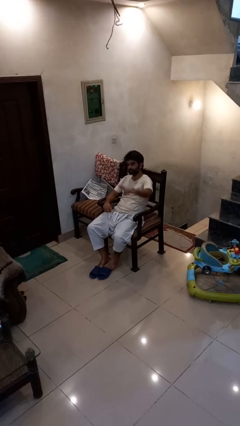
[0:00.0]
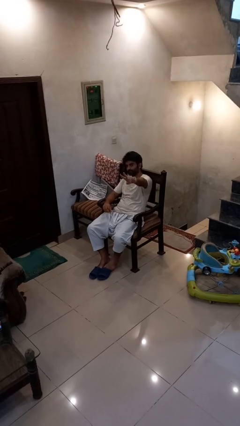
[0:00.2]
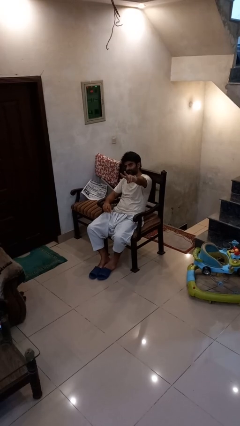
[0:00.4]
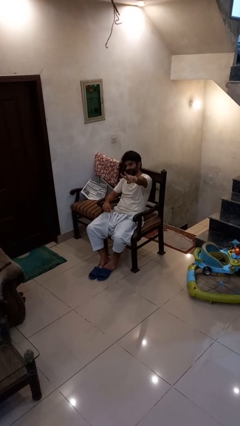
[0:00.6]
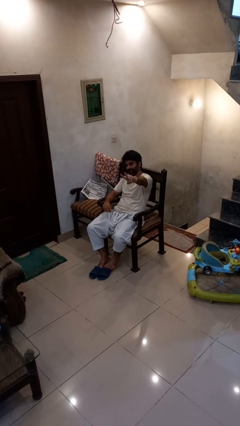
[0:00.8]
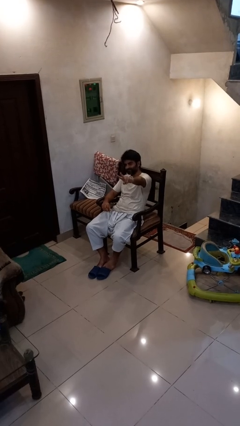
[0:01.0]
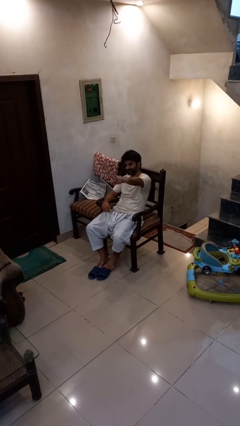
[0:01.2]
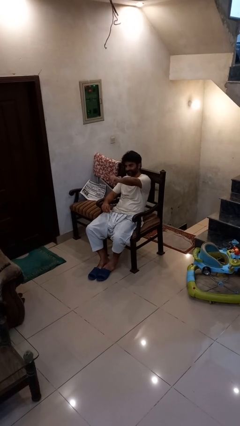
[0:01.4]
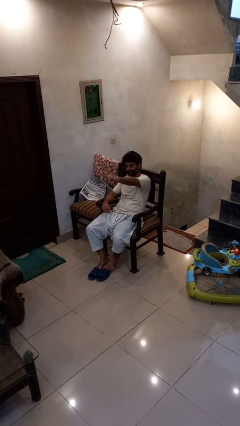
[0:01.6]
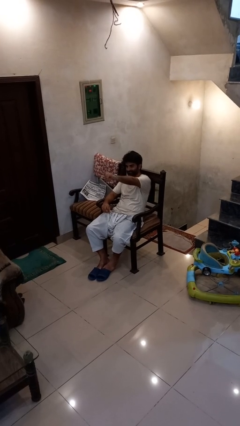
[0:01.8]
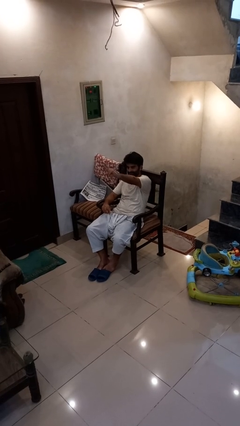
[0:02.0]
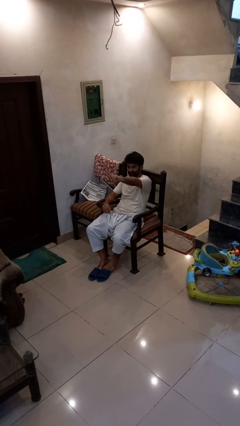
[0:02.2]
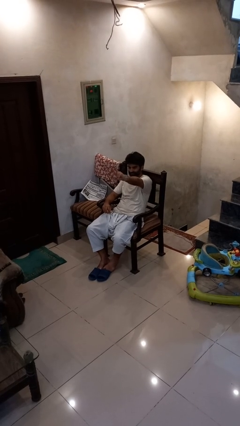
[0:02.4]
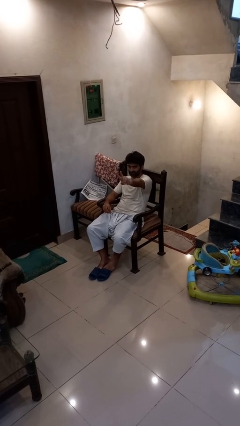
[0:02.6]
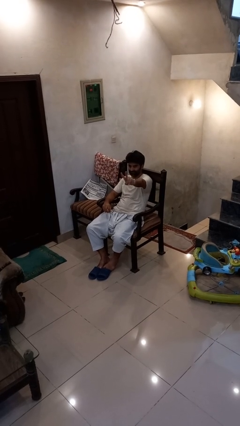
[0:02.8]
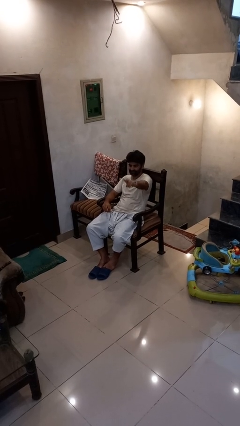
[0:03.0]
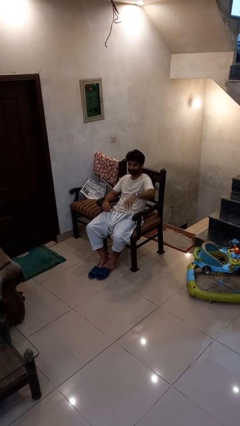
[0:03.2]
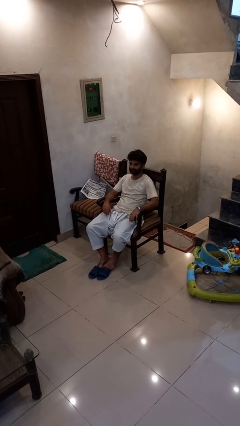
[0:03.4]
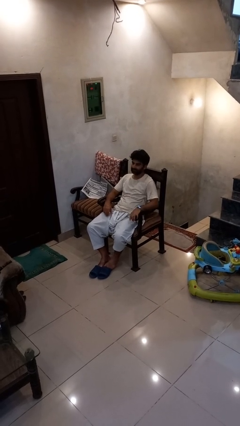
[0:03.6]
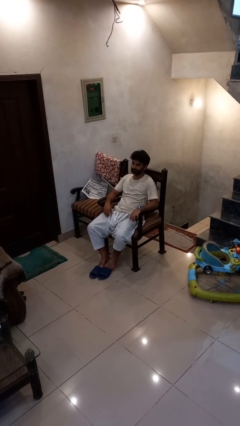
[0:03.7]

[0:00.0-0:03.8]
person gestures peace

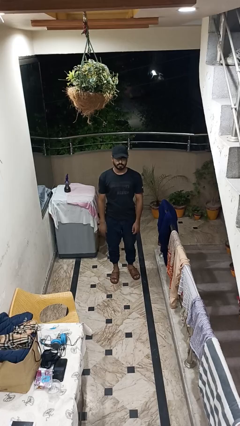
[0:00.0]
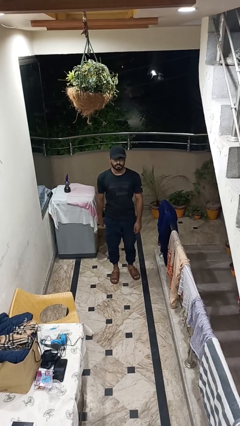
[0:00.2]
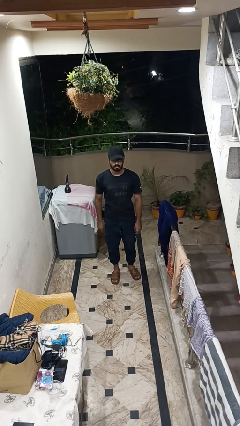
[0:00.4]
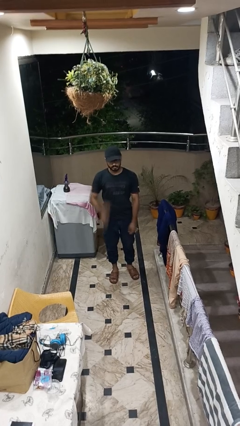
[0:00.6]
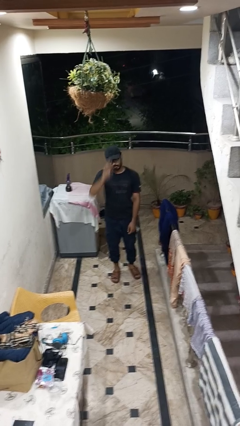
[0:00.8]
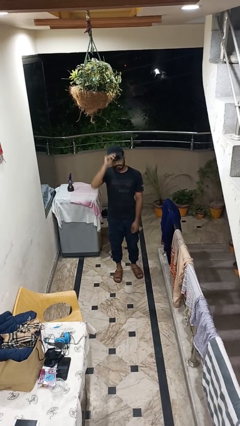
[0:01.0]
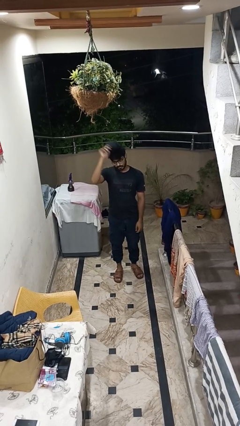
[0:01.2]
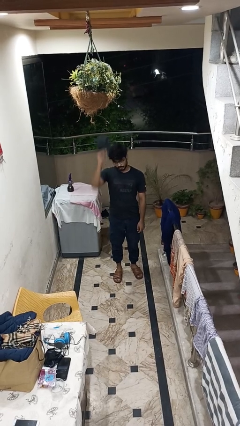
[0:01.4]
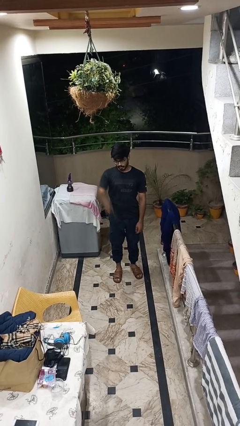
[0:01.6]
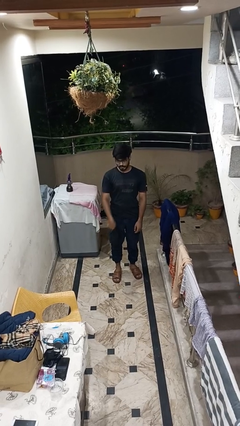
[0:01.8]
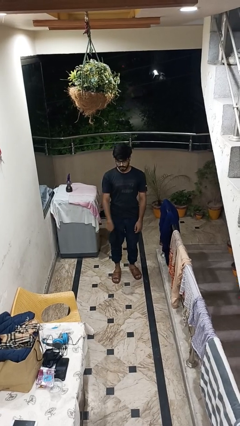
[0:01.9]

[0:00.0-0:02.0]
person takes off hat

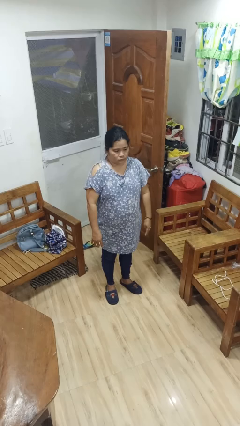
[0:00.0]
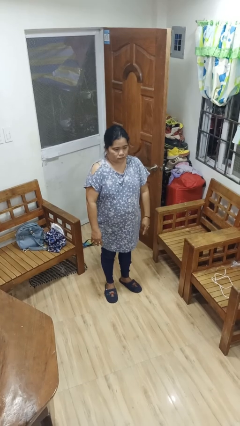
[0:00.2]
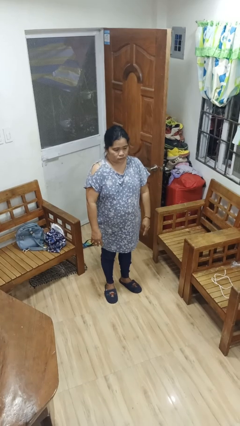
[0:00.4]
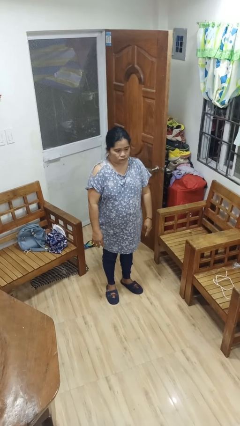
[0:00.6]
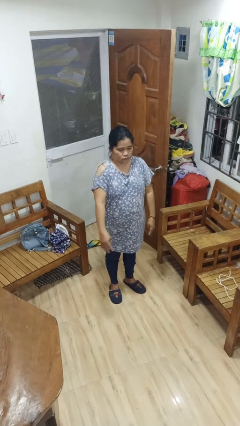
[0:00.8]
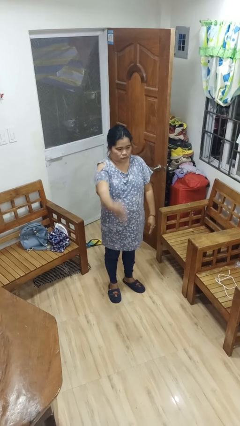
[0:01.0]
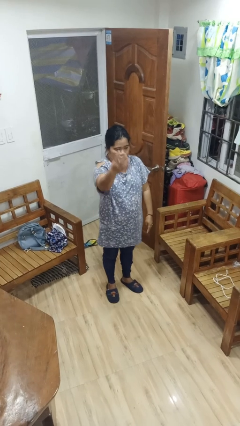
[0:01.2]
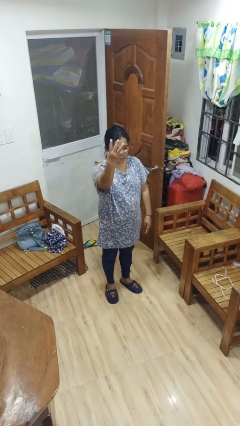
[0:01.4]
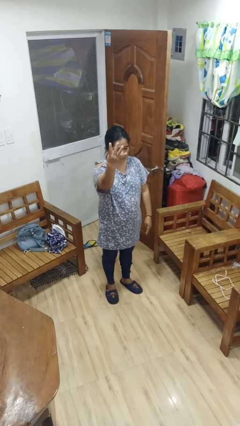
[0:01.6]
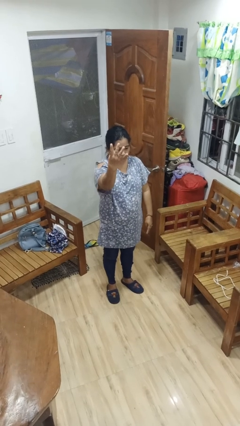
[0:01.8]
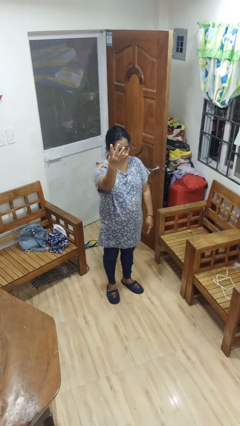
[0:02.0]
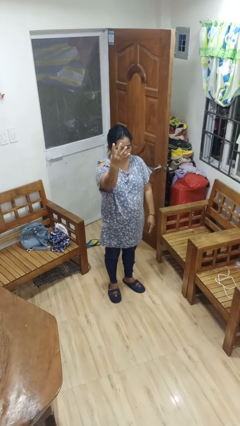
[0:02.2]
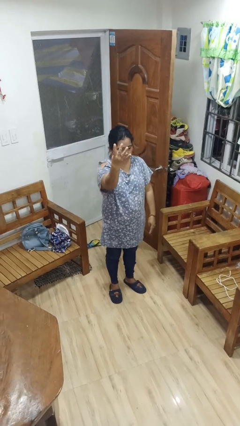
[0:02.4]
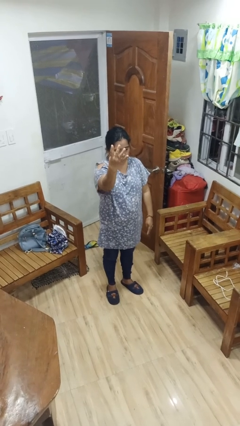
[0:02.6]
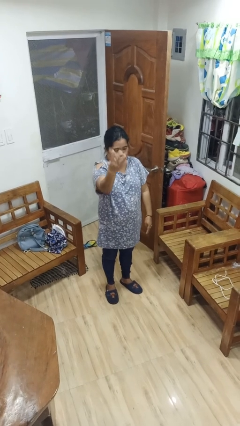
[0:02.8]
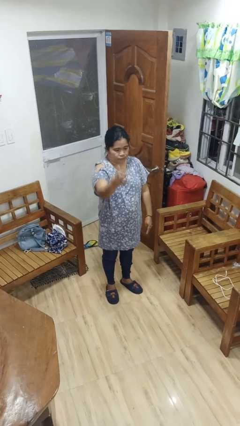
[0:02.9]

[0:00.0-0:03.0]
person gestures number four

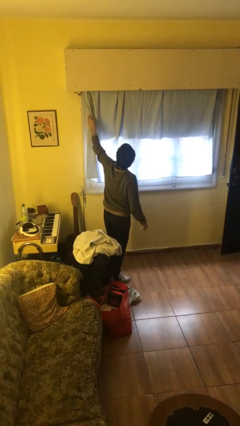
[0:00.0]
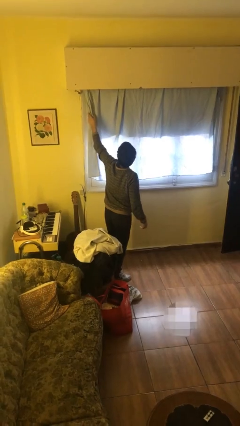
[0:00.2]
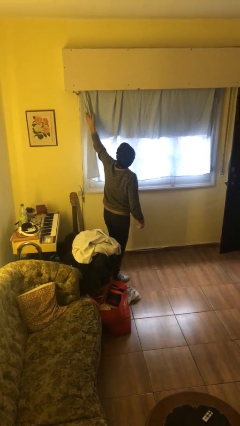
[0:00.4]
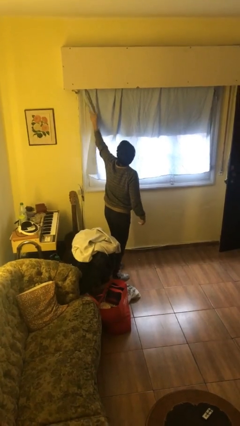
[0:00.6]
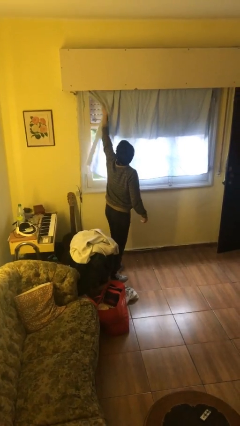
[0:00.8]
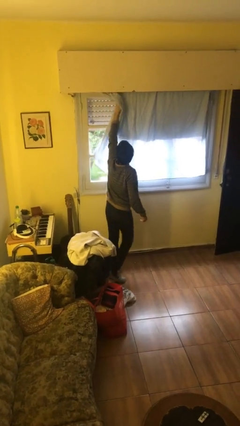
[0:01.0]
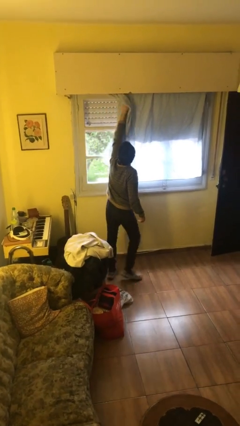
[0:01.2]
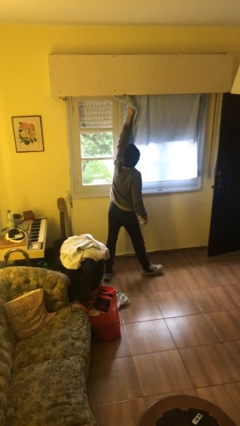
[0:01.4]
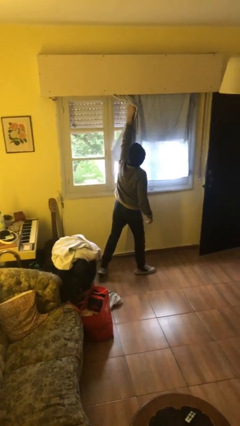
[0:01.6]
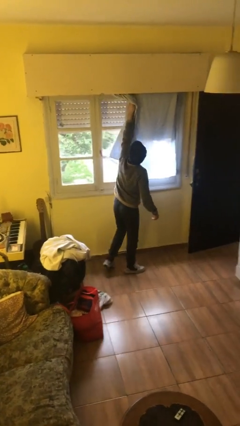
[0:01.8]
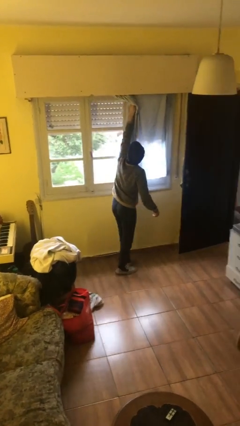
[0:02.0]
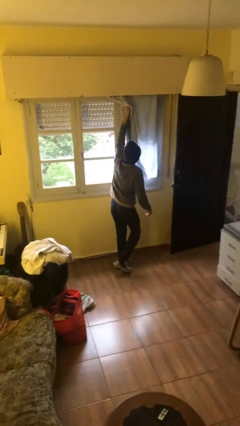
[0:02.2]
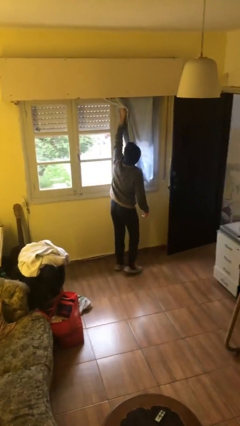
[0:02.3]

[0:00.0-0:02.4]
person opens curtains

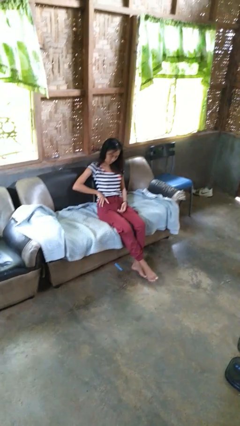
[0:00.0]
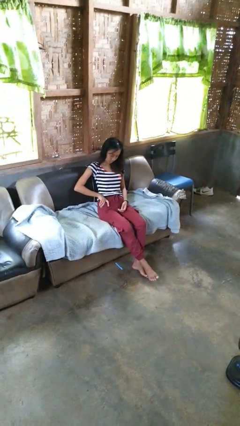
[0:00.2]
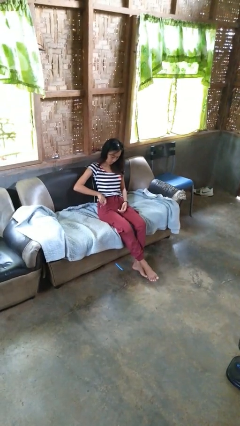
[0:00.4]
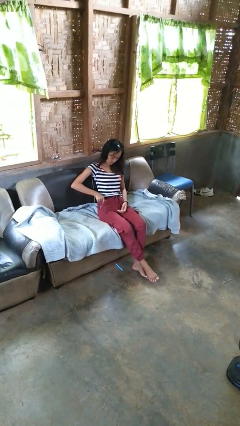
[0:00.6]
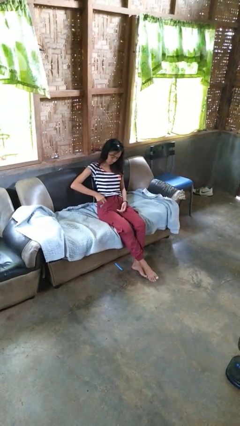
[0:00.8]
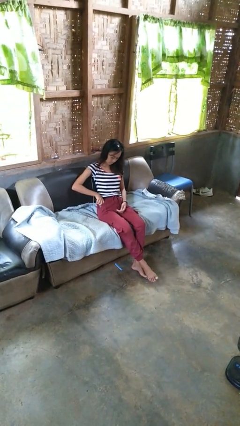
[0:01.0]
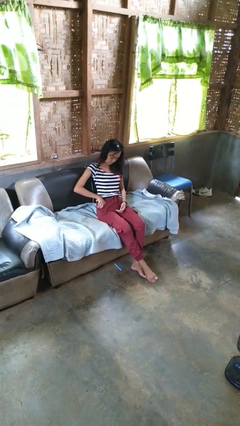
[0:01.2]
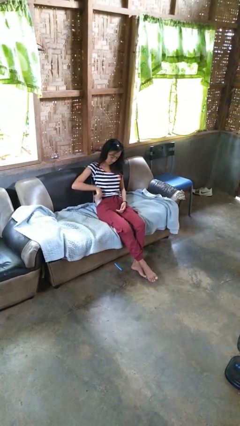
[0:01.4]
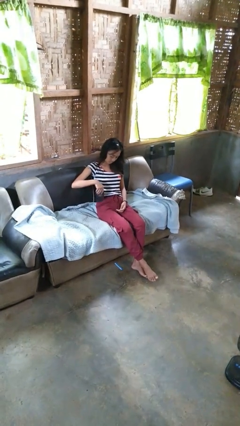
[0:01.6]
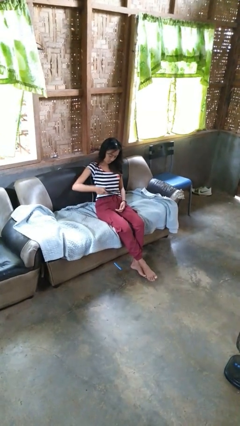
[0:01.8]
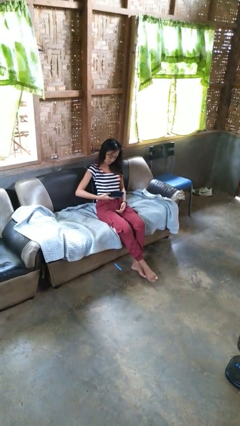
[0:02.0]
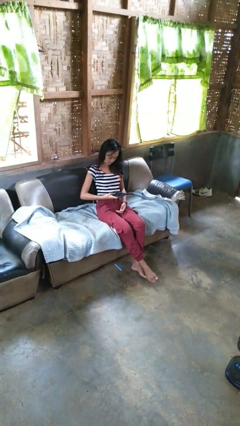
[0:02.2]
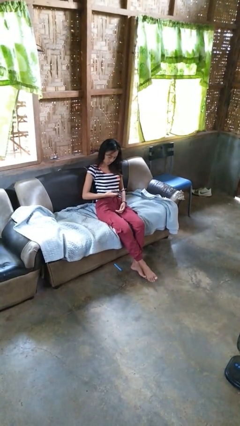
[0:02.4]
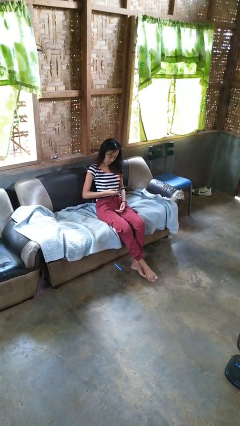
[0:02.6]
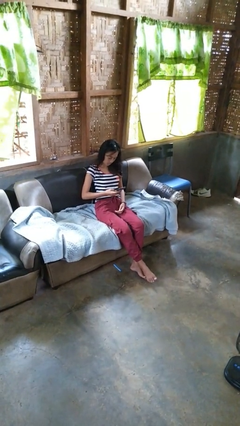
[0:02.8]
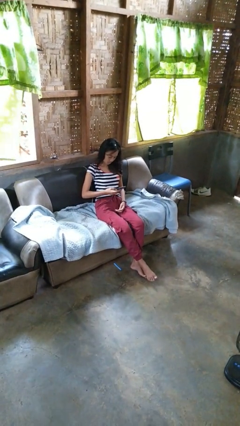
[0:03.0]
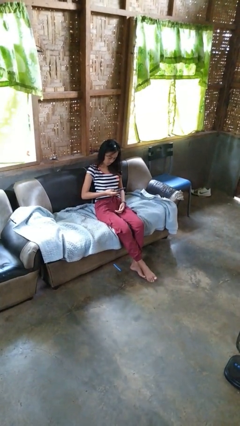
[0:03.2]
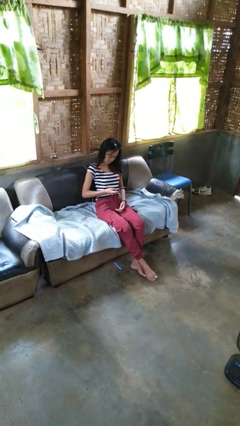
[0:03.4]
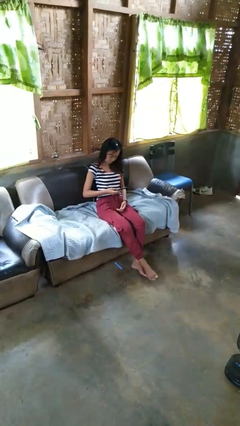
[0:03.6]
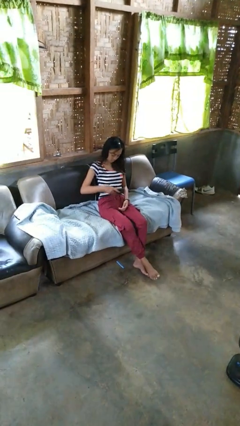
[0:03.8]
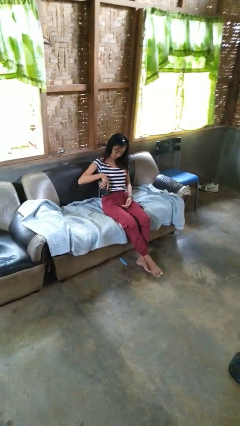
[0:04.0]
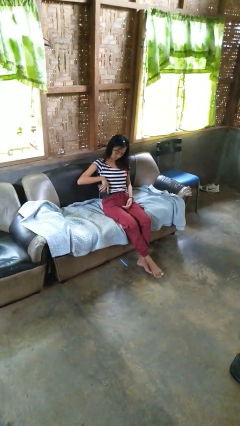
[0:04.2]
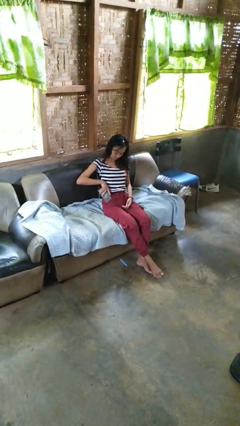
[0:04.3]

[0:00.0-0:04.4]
person takes phone from pocket

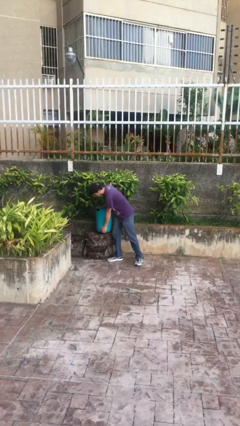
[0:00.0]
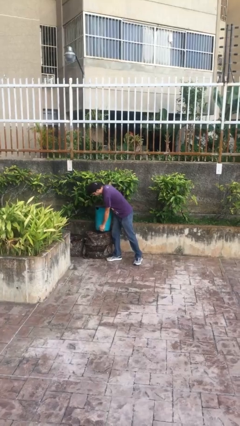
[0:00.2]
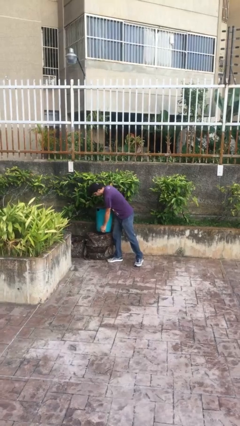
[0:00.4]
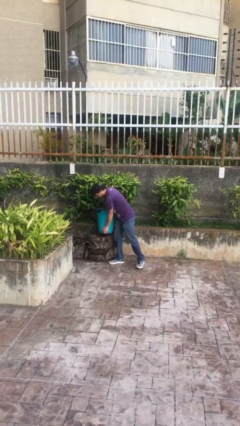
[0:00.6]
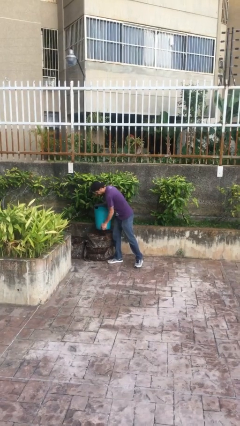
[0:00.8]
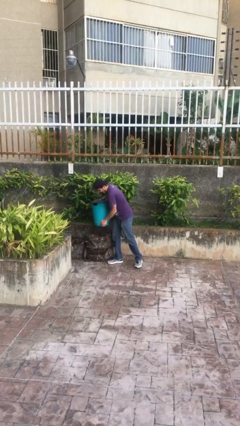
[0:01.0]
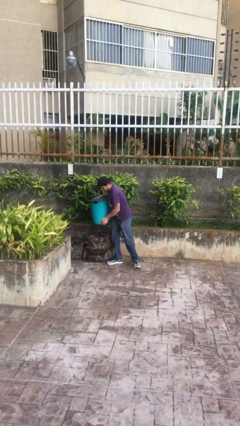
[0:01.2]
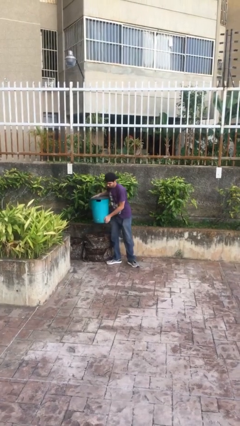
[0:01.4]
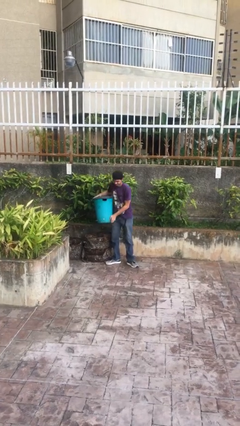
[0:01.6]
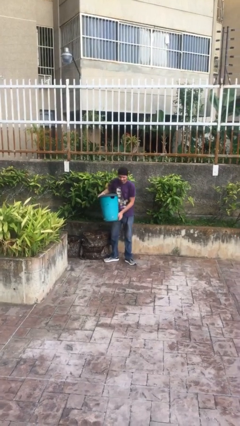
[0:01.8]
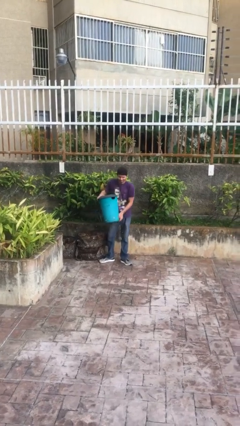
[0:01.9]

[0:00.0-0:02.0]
person picks up object from floor
